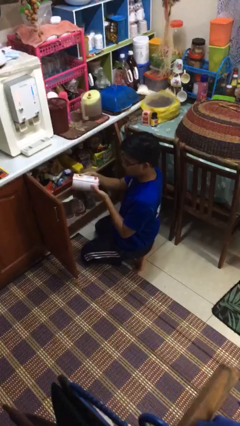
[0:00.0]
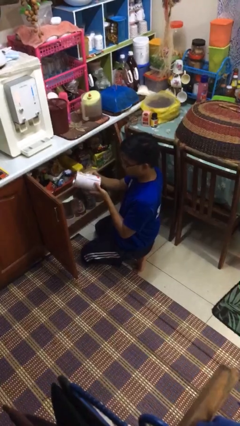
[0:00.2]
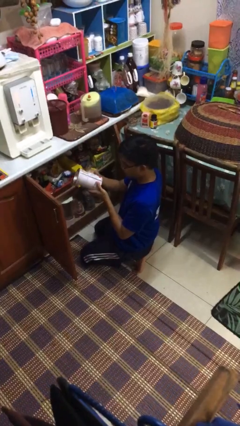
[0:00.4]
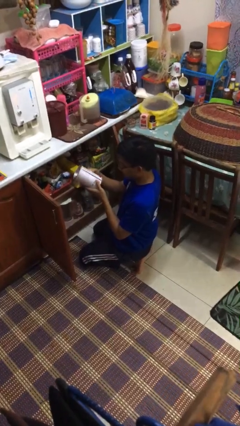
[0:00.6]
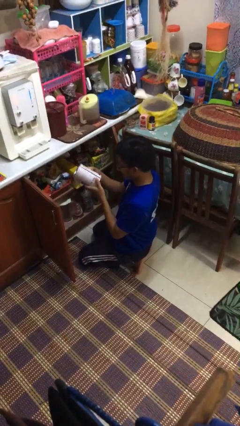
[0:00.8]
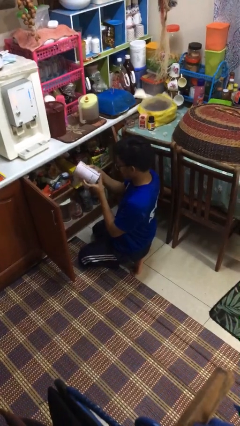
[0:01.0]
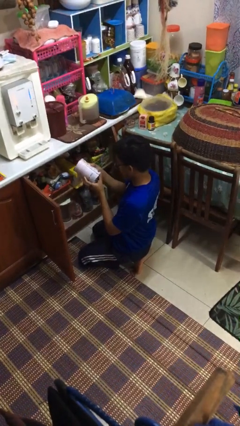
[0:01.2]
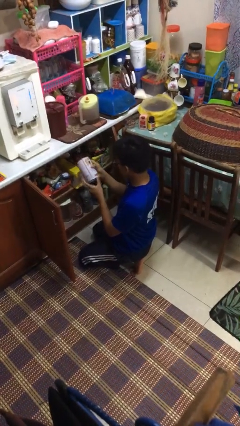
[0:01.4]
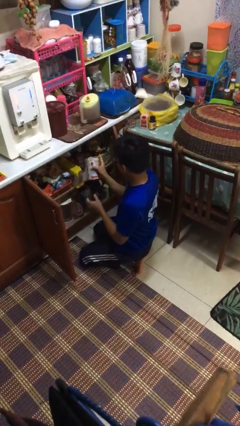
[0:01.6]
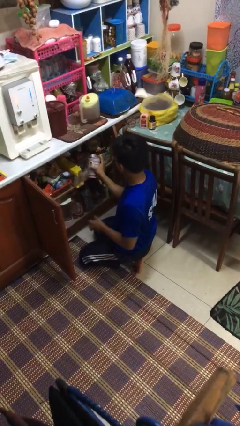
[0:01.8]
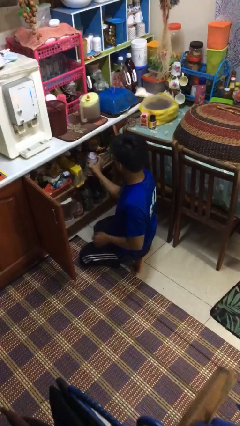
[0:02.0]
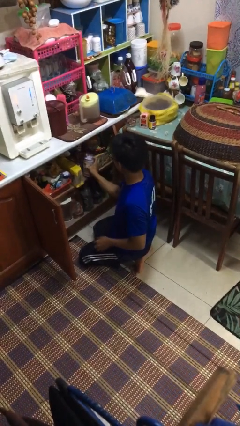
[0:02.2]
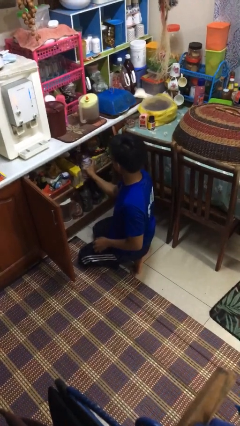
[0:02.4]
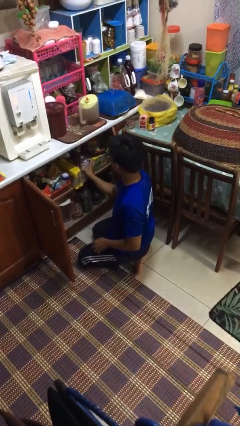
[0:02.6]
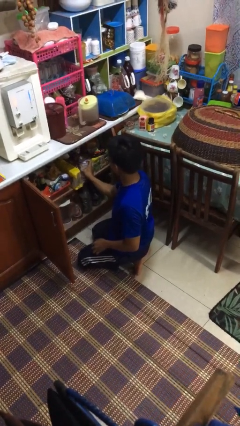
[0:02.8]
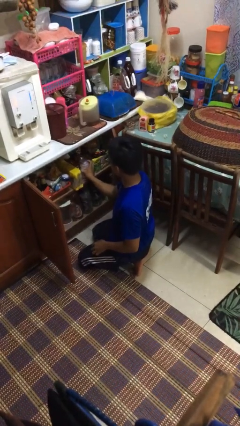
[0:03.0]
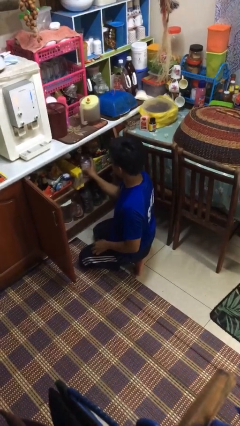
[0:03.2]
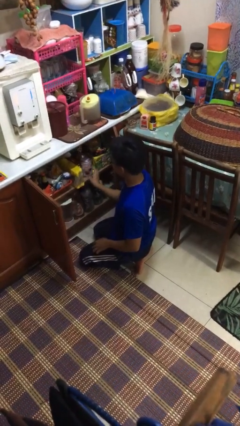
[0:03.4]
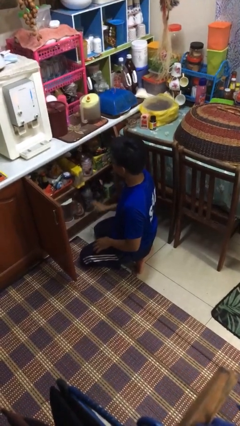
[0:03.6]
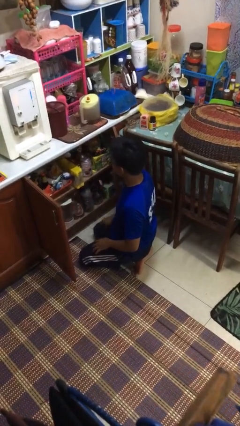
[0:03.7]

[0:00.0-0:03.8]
person puts object in cabinet

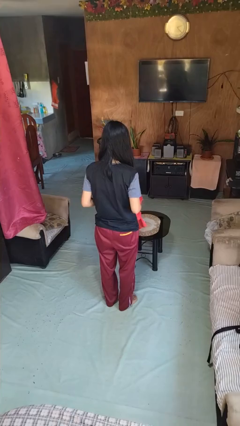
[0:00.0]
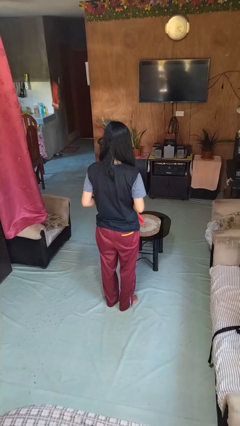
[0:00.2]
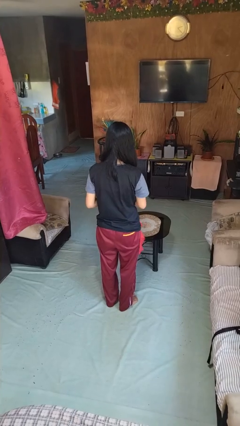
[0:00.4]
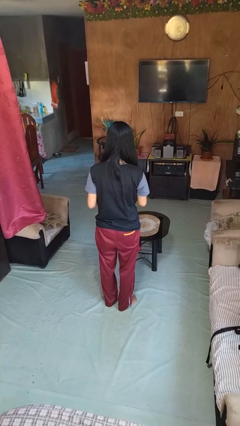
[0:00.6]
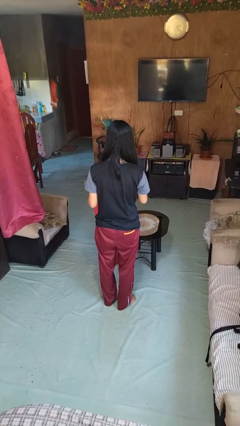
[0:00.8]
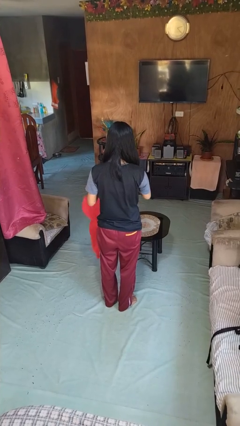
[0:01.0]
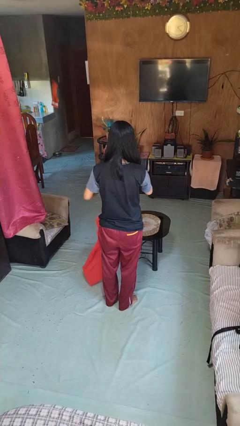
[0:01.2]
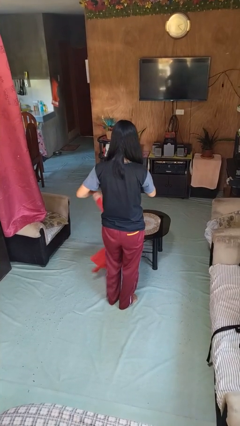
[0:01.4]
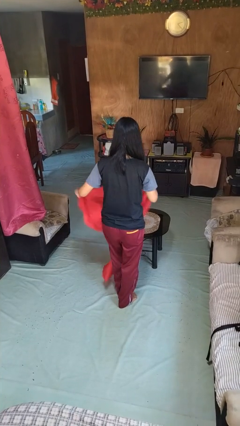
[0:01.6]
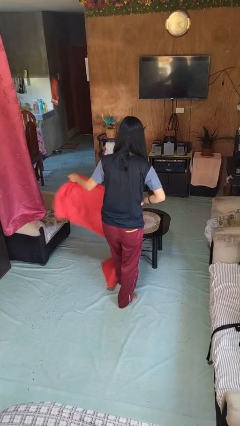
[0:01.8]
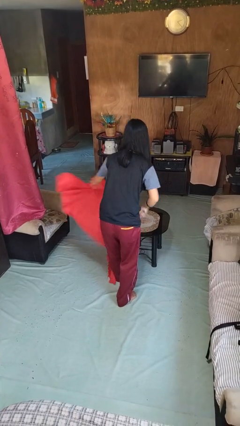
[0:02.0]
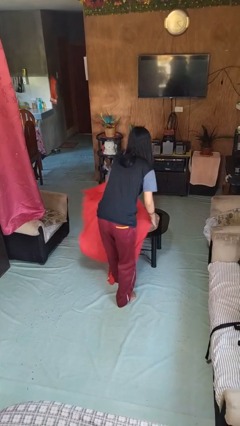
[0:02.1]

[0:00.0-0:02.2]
person spreads tablecloth

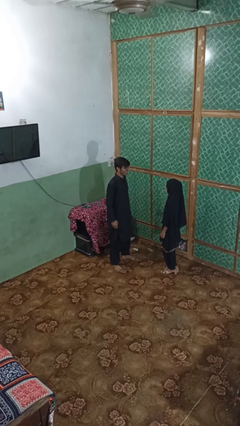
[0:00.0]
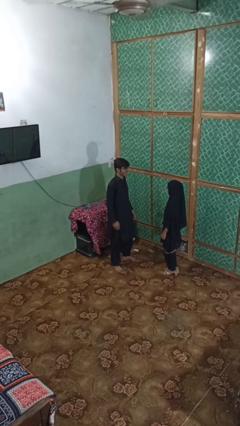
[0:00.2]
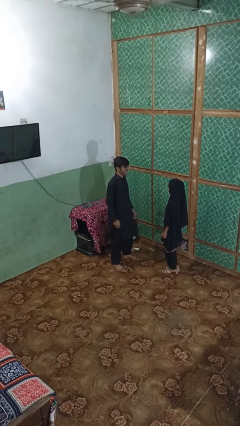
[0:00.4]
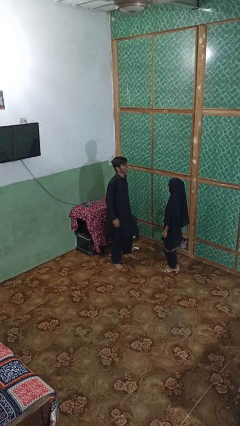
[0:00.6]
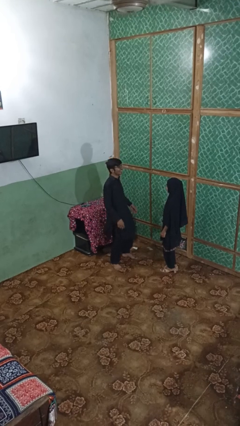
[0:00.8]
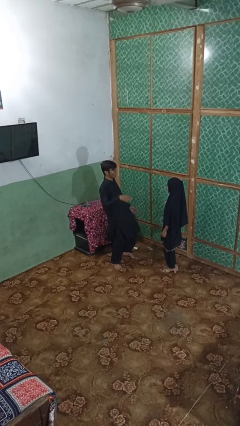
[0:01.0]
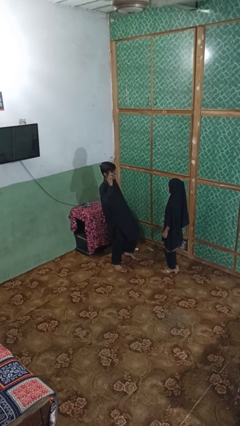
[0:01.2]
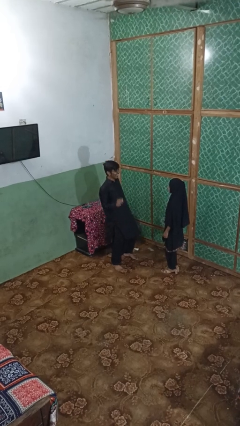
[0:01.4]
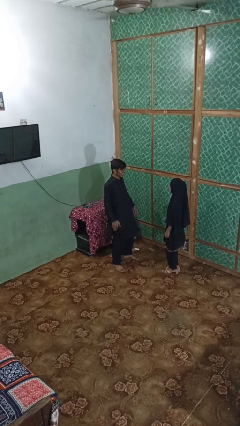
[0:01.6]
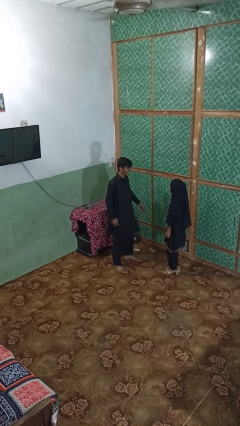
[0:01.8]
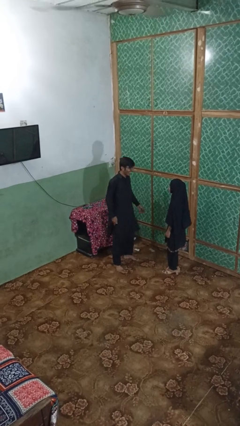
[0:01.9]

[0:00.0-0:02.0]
person laughs with person

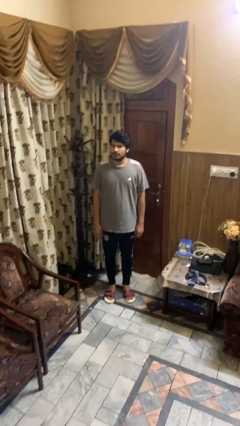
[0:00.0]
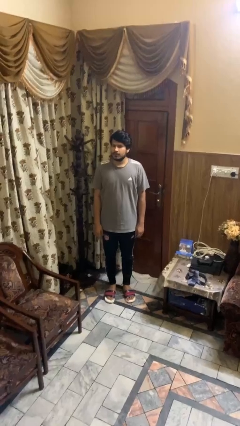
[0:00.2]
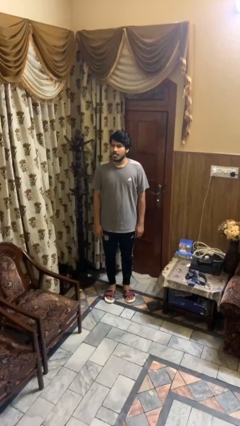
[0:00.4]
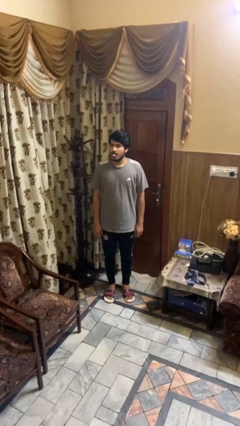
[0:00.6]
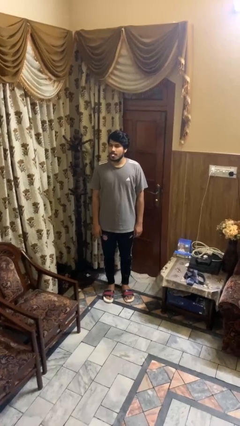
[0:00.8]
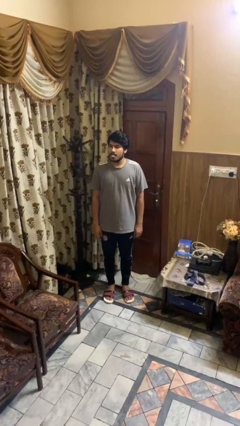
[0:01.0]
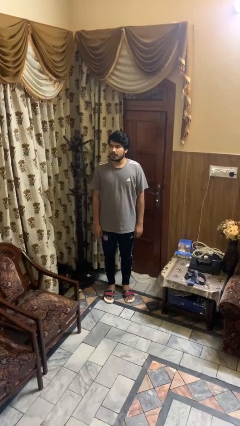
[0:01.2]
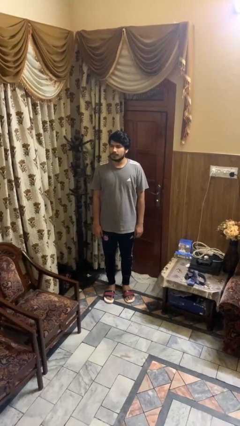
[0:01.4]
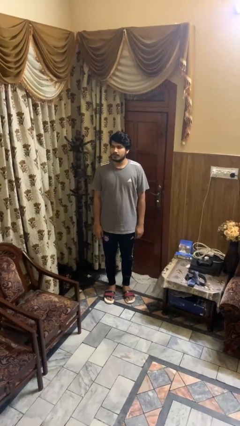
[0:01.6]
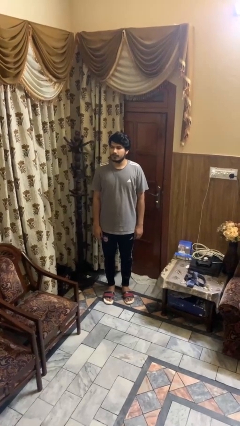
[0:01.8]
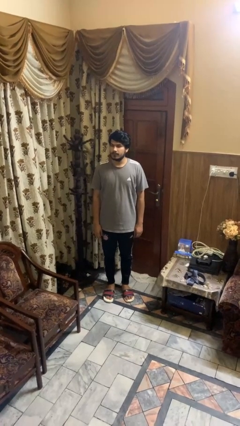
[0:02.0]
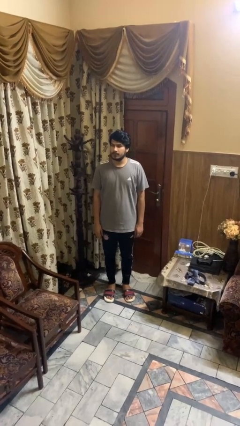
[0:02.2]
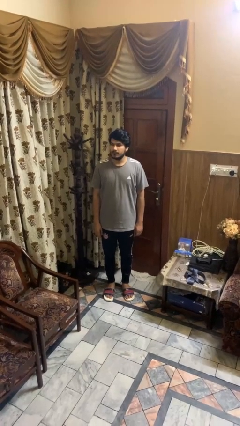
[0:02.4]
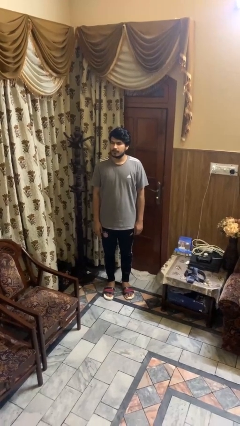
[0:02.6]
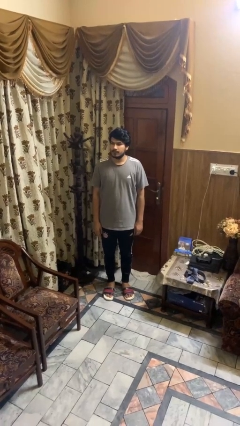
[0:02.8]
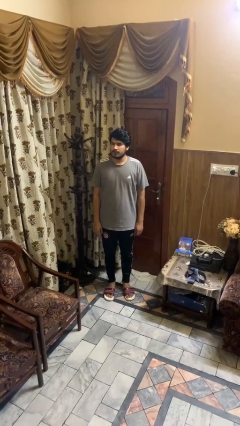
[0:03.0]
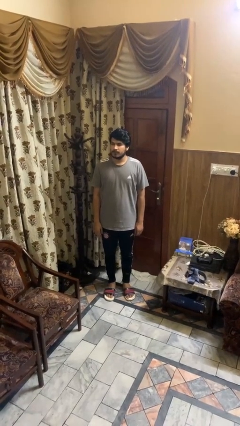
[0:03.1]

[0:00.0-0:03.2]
person sticks out tongue

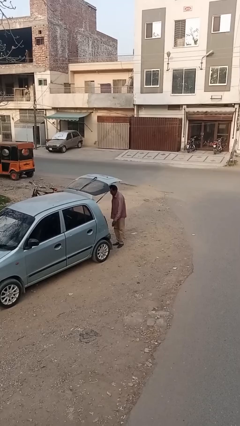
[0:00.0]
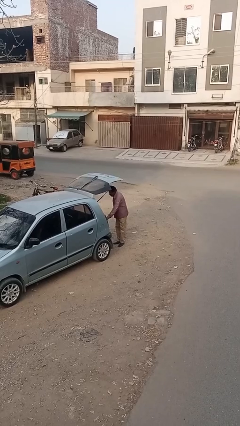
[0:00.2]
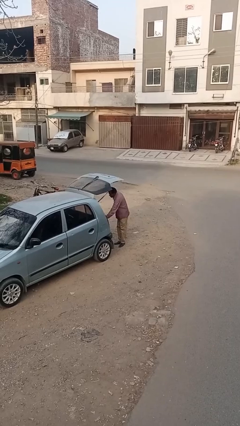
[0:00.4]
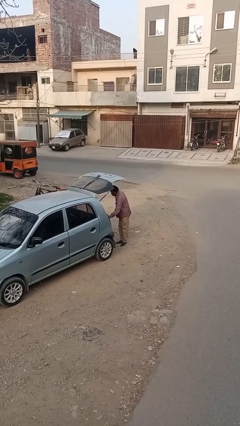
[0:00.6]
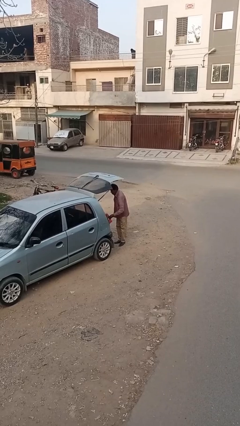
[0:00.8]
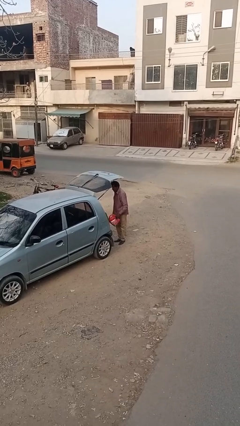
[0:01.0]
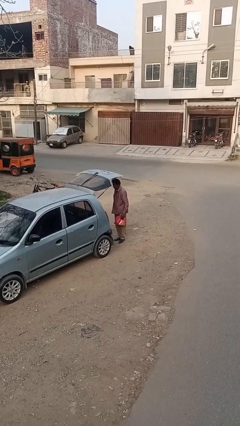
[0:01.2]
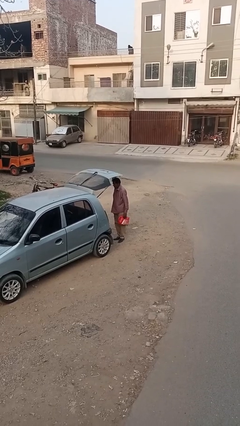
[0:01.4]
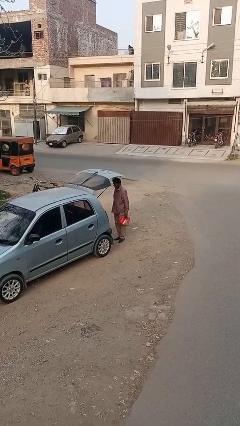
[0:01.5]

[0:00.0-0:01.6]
person unloads car

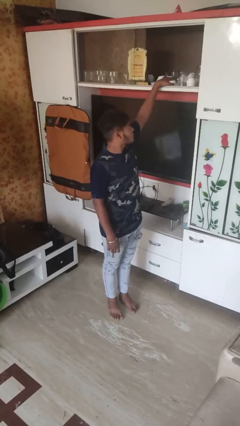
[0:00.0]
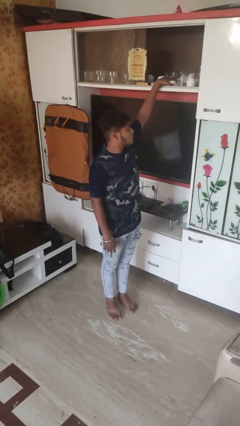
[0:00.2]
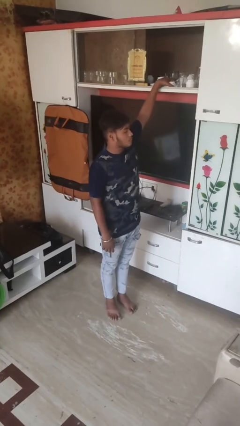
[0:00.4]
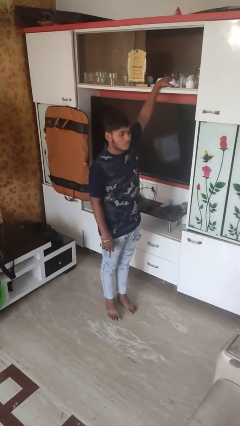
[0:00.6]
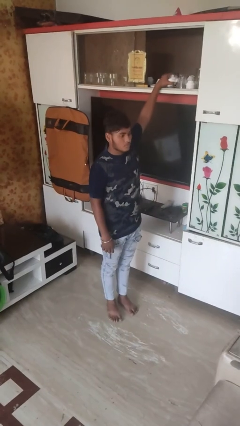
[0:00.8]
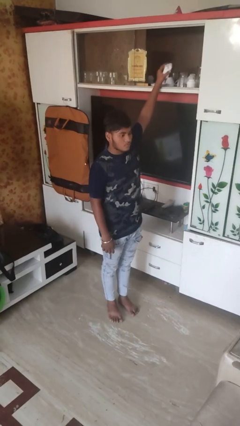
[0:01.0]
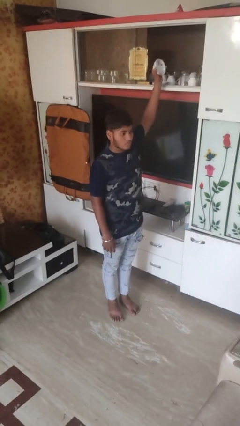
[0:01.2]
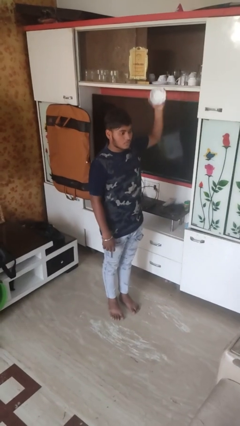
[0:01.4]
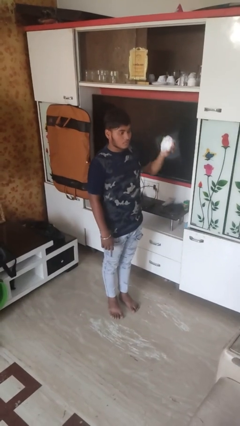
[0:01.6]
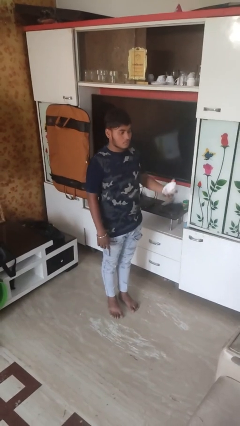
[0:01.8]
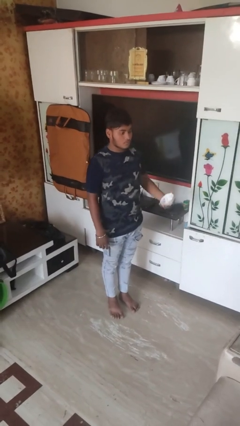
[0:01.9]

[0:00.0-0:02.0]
person takes object from cabinet

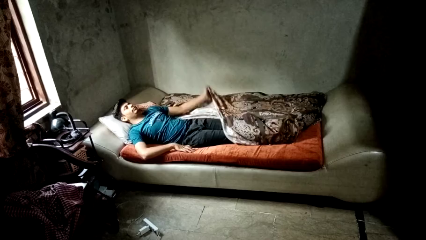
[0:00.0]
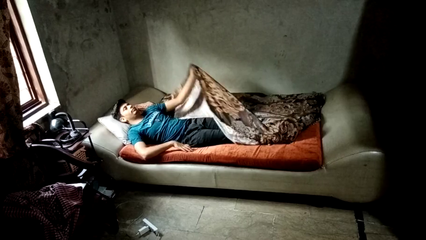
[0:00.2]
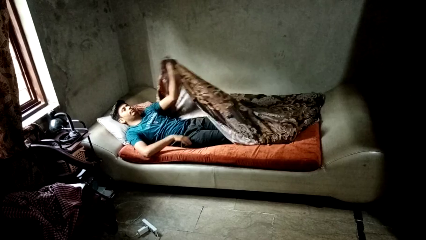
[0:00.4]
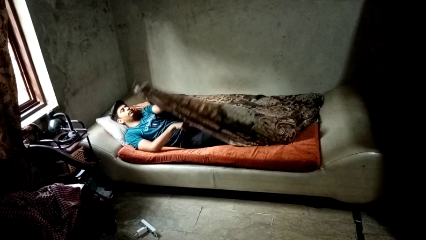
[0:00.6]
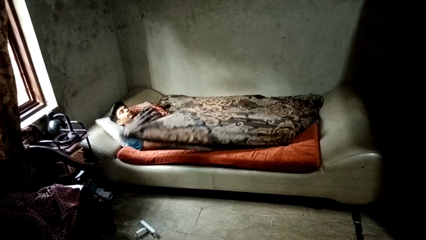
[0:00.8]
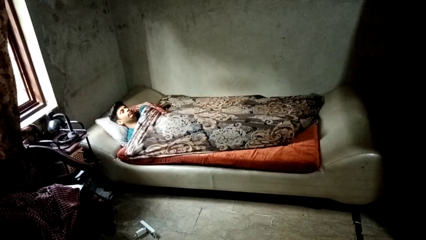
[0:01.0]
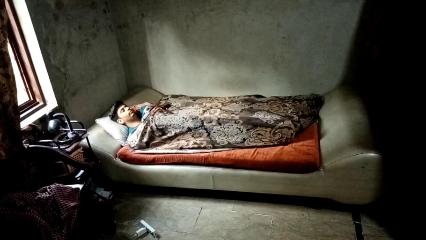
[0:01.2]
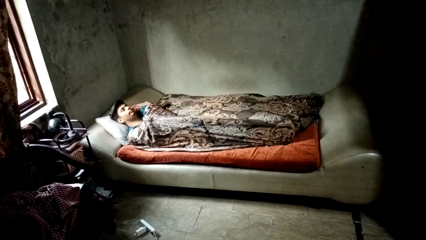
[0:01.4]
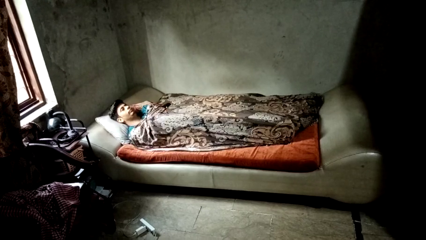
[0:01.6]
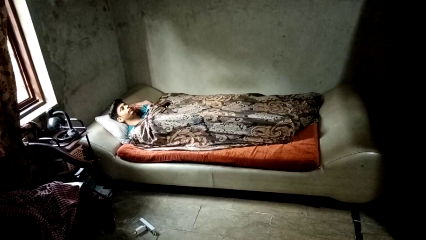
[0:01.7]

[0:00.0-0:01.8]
person covers with bedsheets

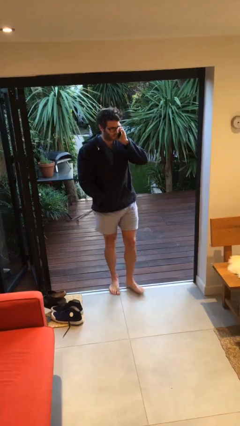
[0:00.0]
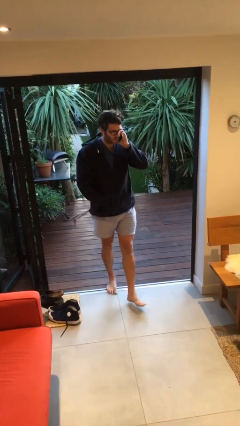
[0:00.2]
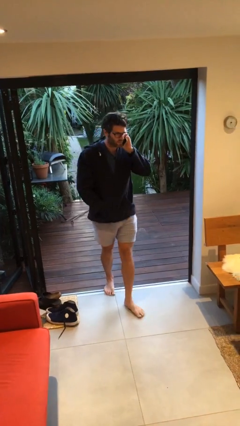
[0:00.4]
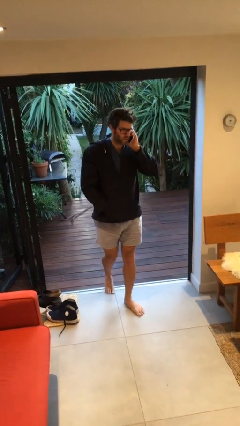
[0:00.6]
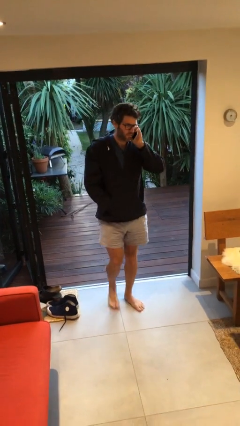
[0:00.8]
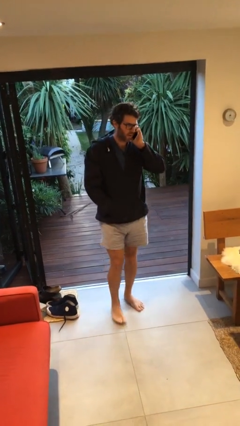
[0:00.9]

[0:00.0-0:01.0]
person enters scene through structure
